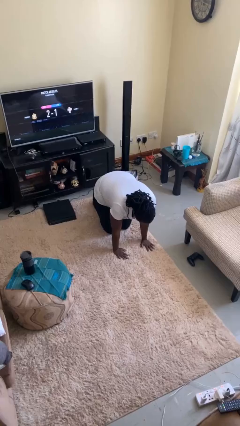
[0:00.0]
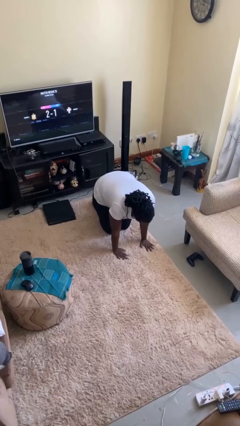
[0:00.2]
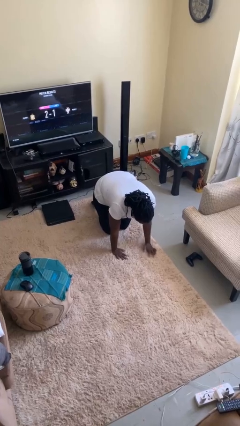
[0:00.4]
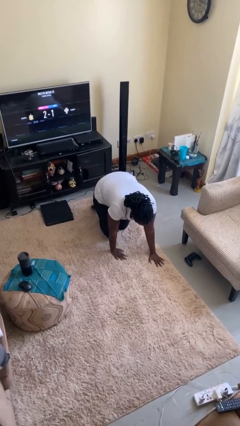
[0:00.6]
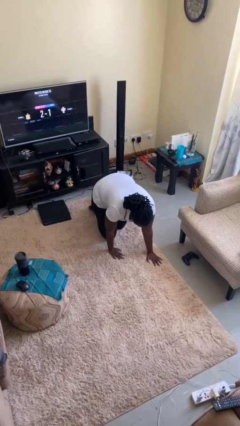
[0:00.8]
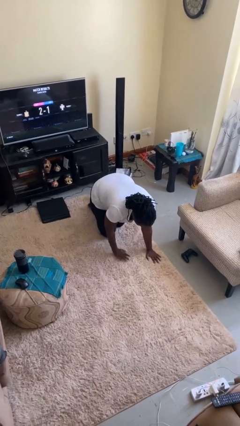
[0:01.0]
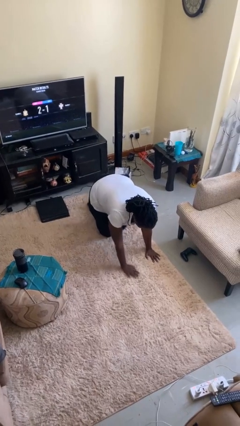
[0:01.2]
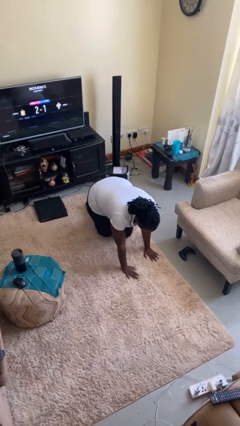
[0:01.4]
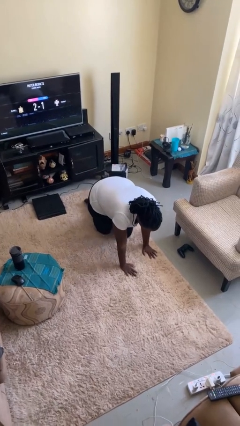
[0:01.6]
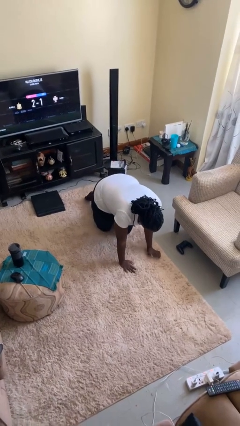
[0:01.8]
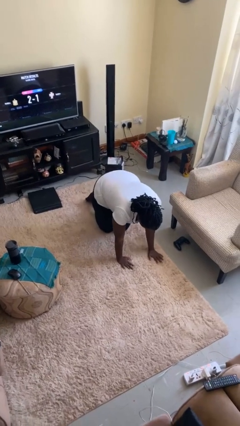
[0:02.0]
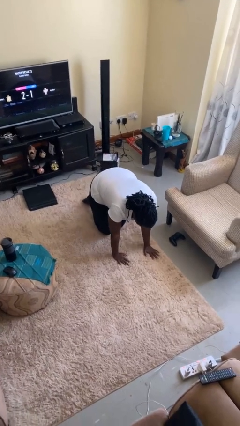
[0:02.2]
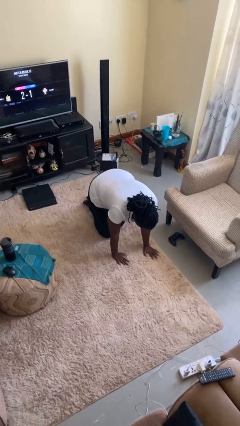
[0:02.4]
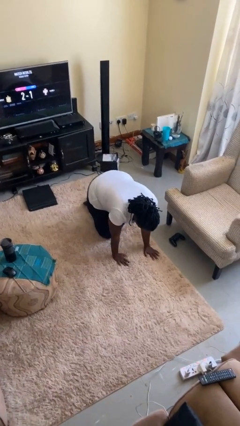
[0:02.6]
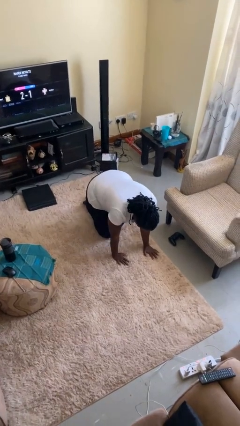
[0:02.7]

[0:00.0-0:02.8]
person crawls

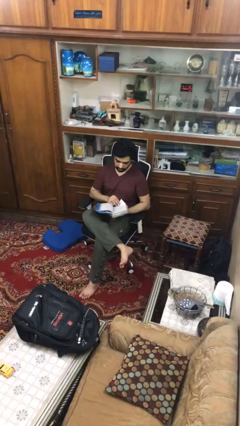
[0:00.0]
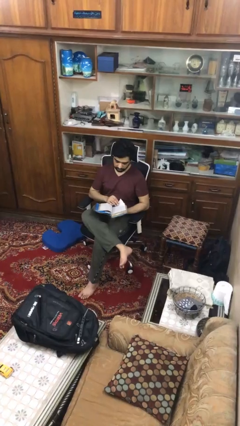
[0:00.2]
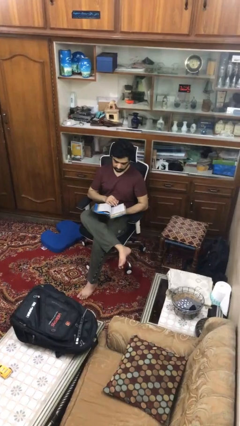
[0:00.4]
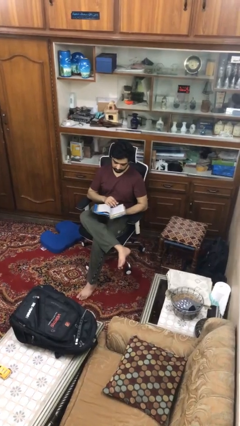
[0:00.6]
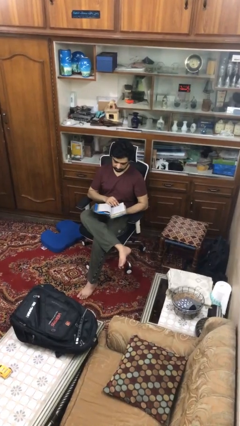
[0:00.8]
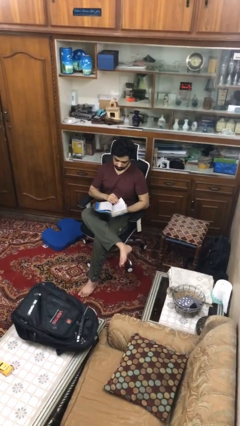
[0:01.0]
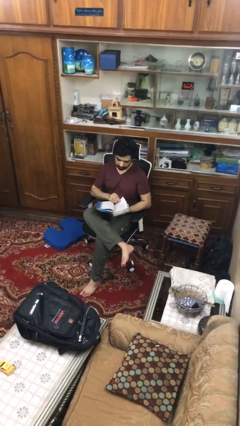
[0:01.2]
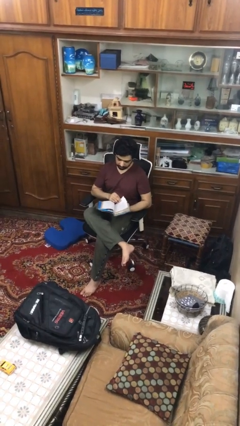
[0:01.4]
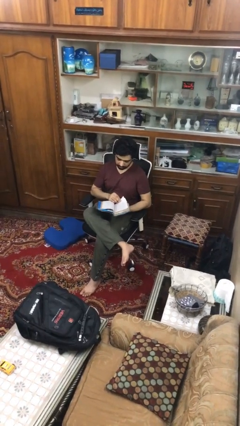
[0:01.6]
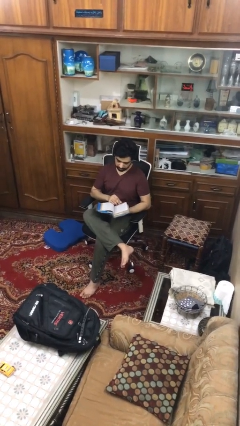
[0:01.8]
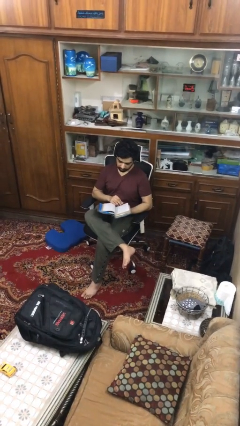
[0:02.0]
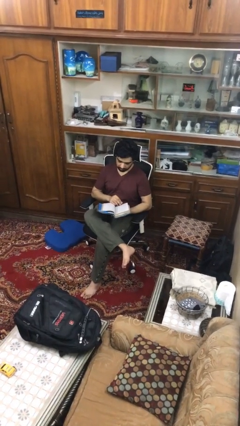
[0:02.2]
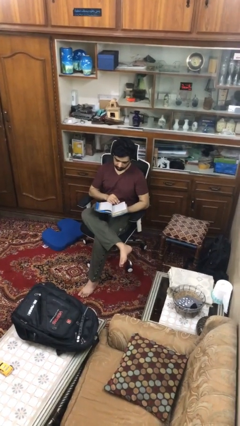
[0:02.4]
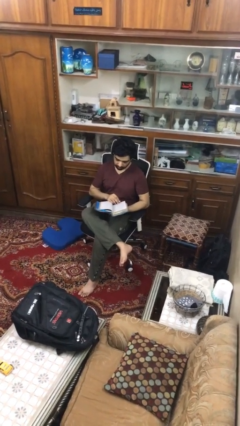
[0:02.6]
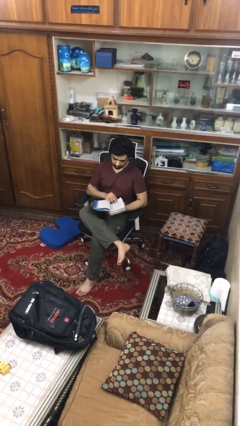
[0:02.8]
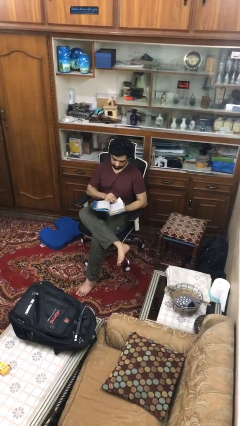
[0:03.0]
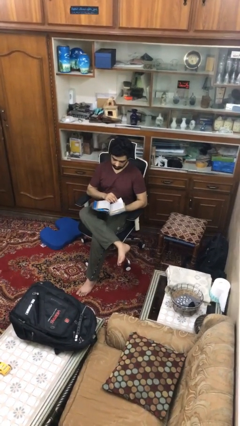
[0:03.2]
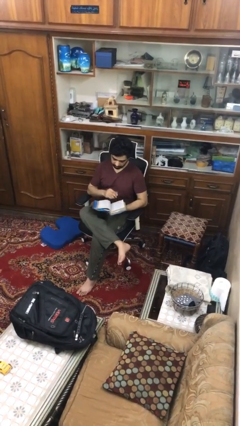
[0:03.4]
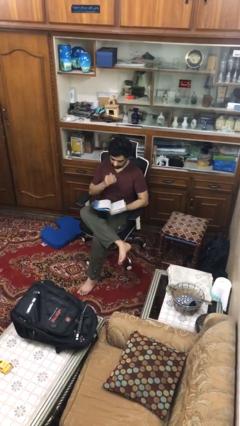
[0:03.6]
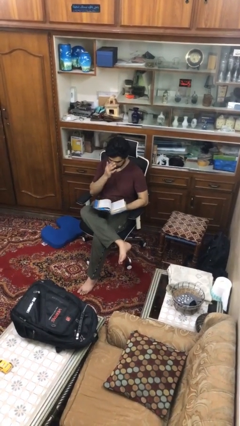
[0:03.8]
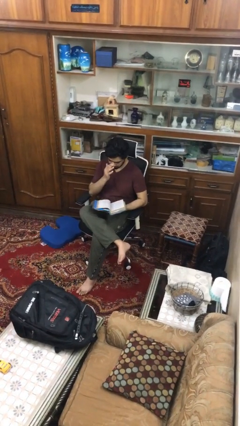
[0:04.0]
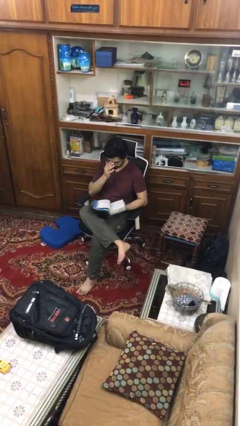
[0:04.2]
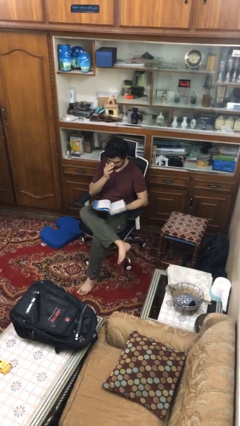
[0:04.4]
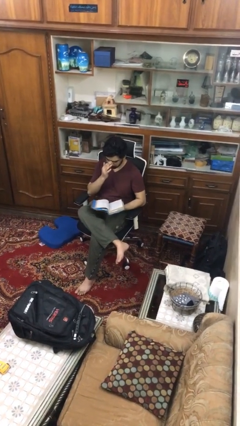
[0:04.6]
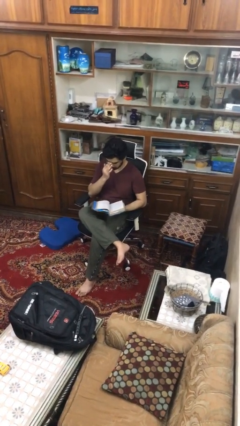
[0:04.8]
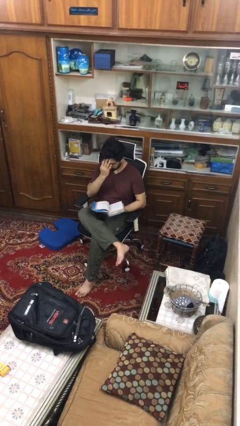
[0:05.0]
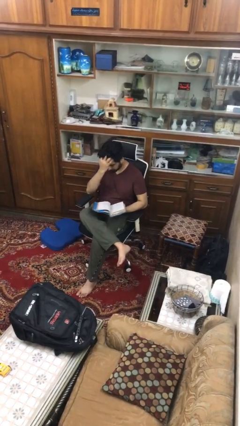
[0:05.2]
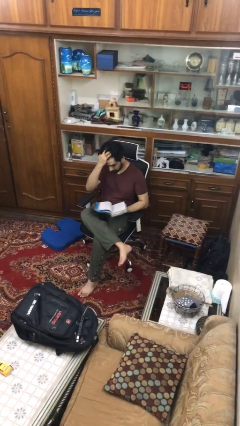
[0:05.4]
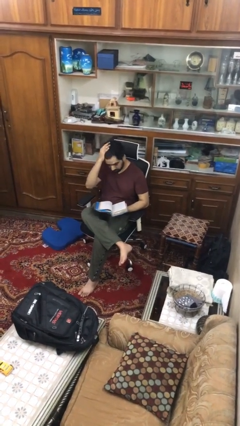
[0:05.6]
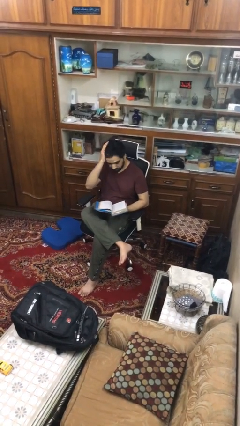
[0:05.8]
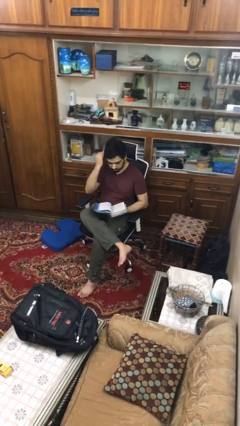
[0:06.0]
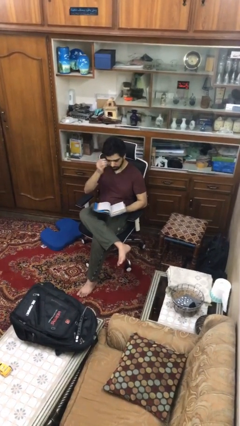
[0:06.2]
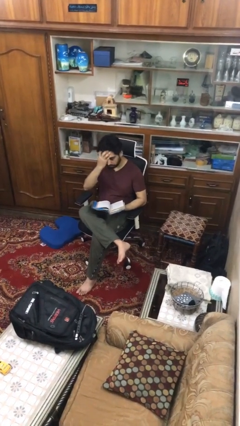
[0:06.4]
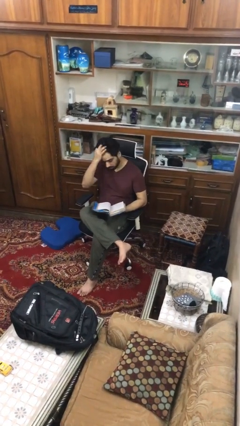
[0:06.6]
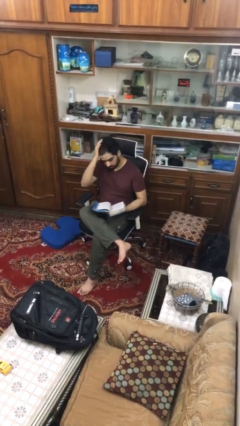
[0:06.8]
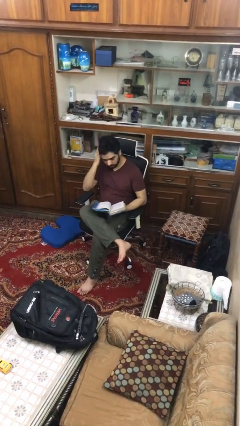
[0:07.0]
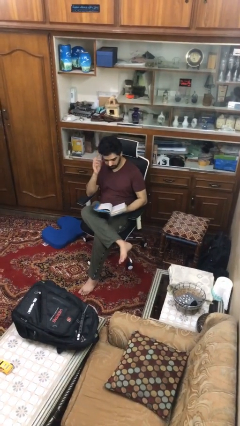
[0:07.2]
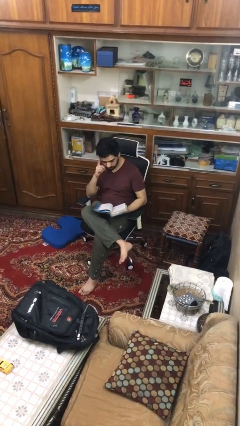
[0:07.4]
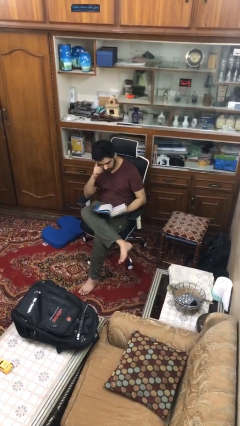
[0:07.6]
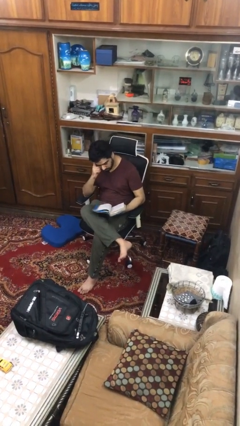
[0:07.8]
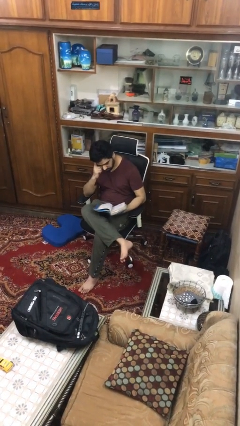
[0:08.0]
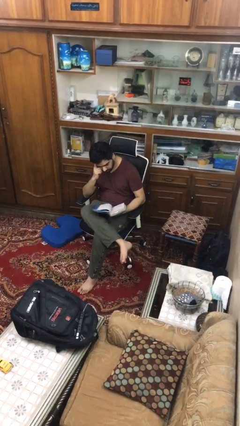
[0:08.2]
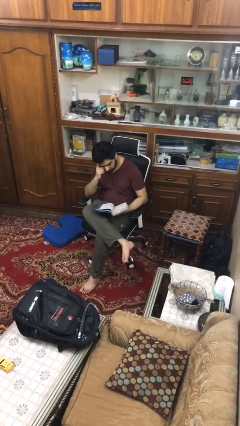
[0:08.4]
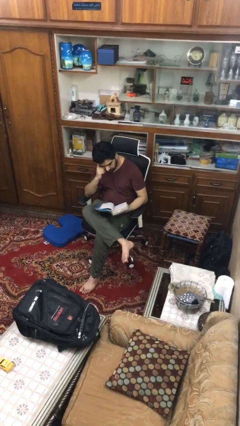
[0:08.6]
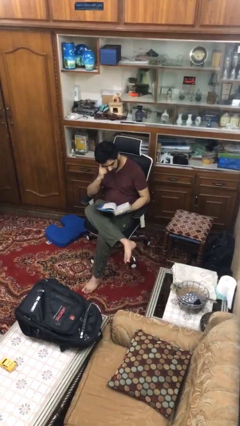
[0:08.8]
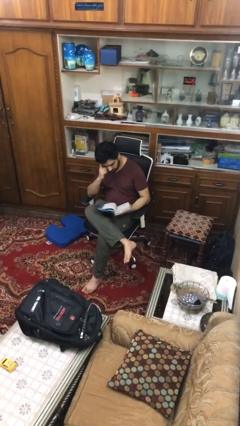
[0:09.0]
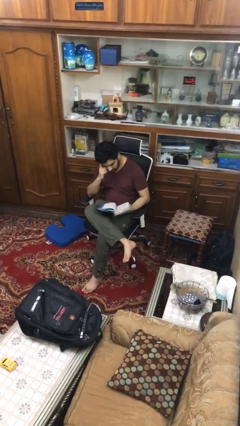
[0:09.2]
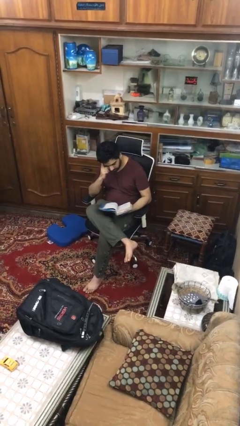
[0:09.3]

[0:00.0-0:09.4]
person reads document

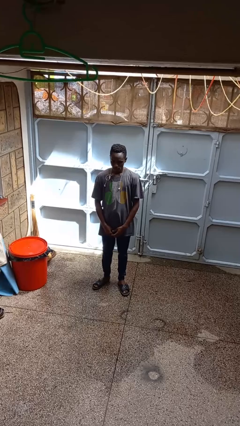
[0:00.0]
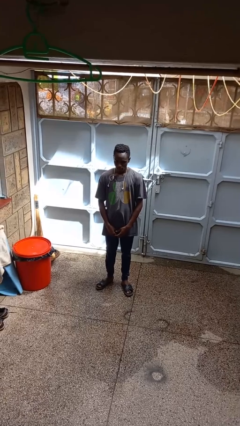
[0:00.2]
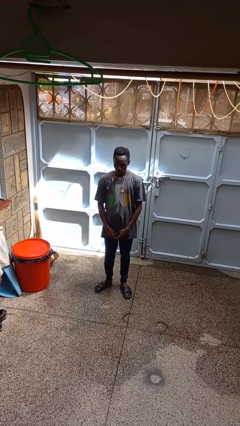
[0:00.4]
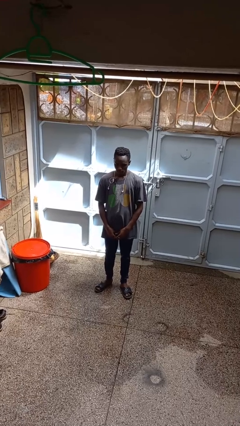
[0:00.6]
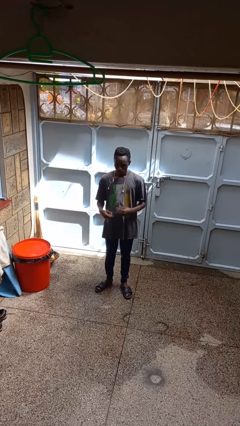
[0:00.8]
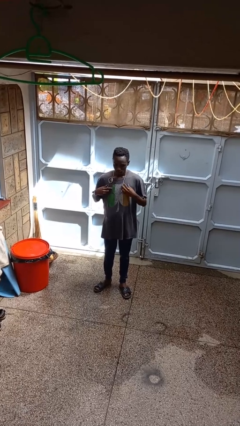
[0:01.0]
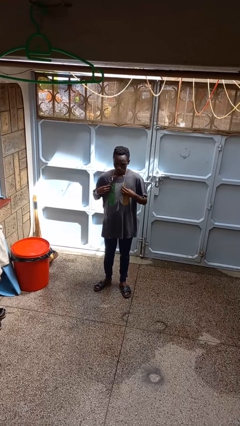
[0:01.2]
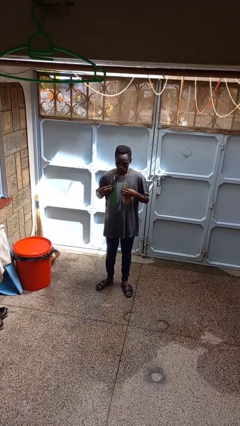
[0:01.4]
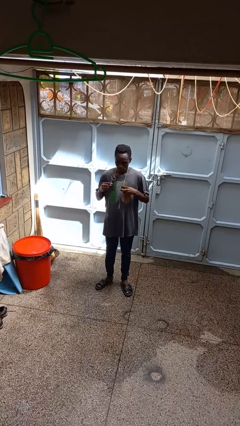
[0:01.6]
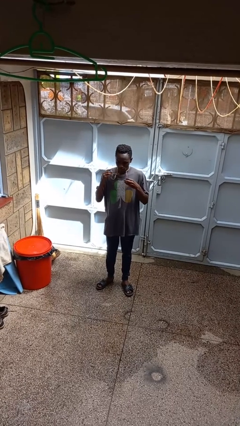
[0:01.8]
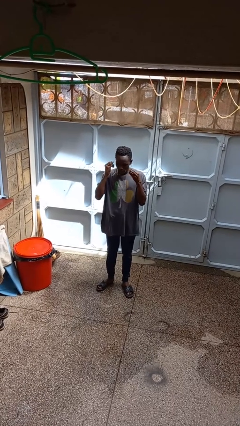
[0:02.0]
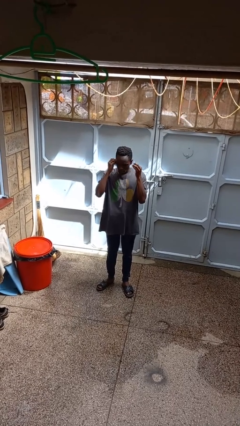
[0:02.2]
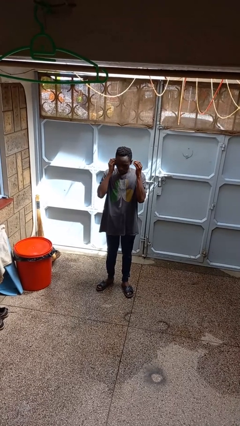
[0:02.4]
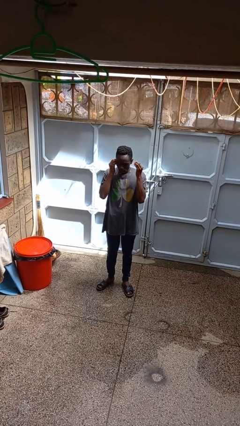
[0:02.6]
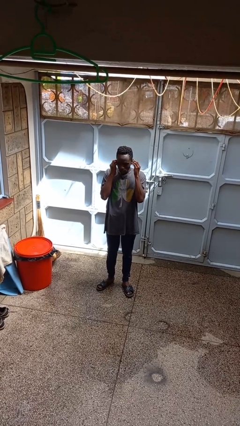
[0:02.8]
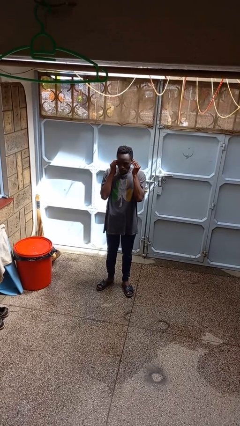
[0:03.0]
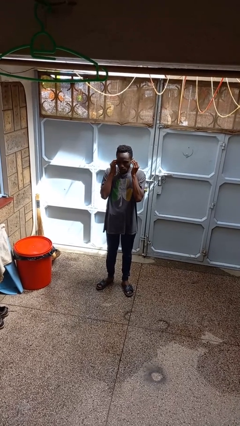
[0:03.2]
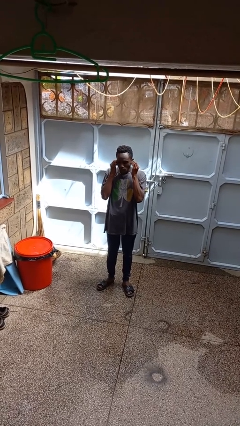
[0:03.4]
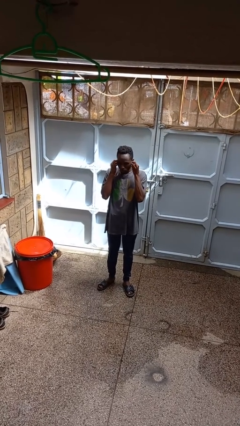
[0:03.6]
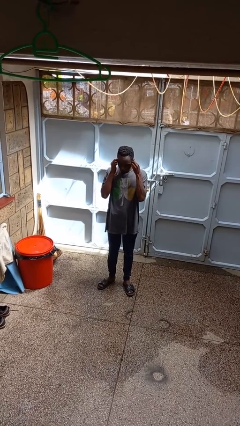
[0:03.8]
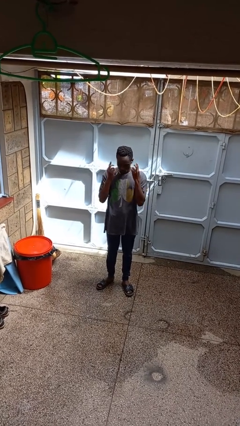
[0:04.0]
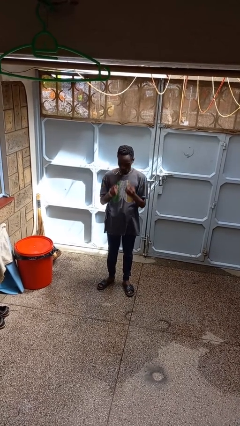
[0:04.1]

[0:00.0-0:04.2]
person puts on headphones

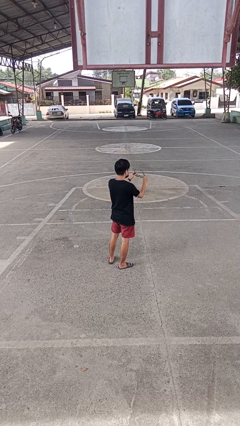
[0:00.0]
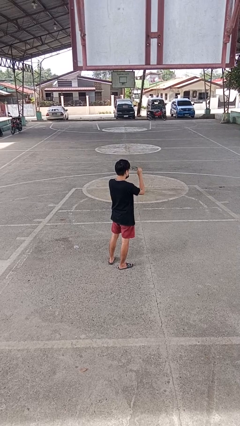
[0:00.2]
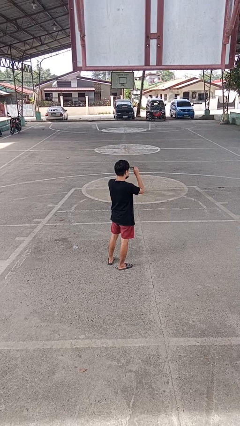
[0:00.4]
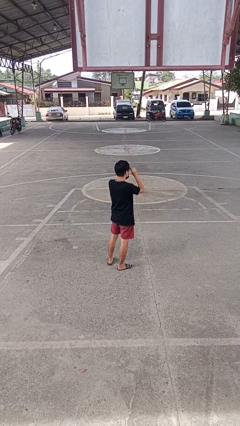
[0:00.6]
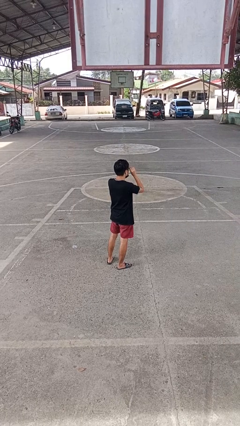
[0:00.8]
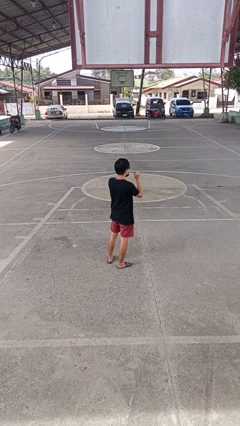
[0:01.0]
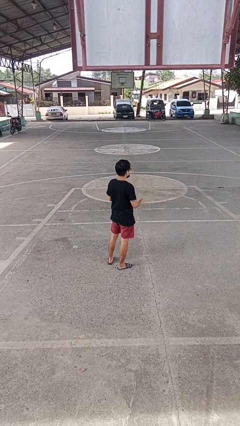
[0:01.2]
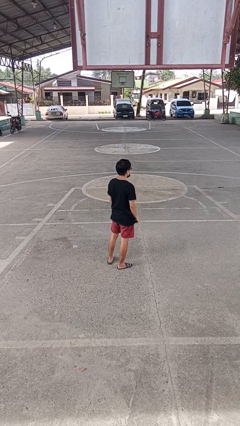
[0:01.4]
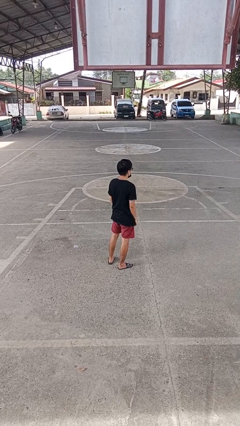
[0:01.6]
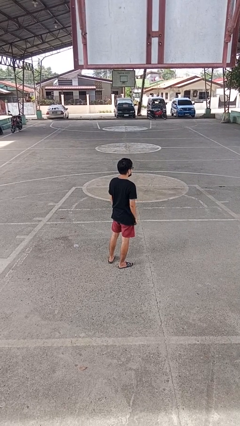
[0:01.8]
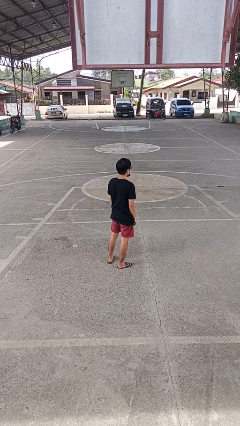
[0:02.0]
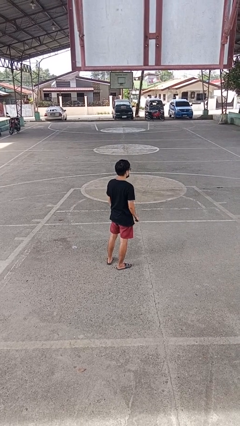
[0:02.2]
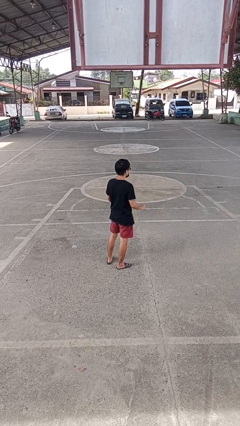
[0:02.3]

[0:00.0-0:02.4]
person puts on glasses
